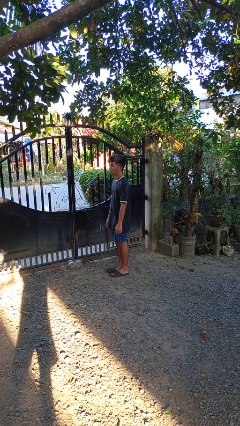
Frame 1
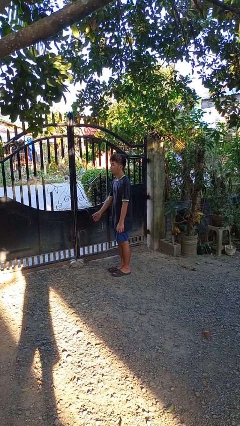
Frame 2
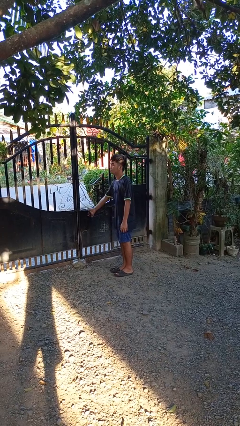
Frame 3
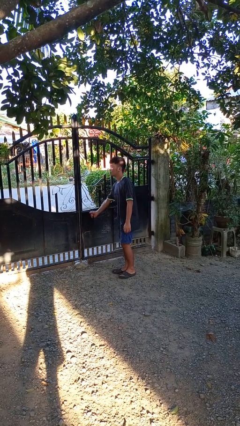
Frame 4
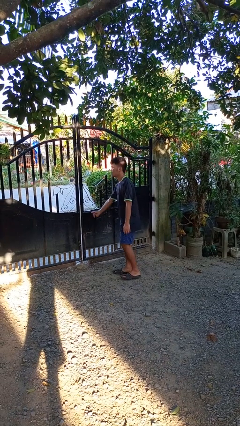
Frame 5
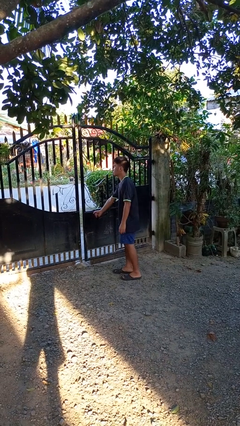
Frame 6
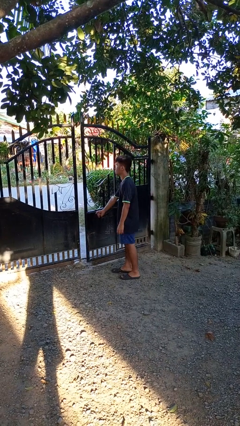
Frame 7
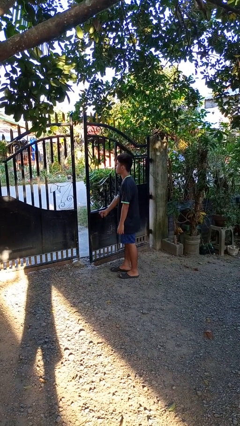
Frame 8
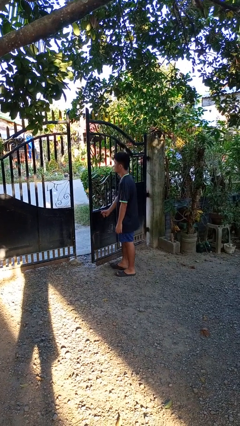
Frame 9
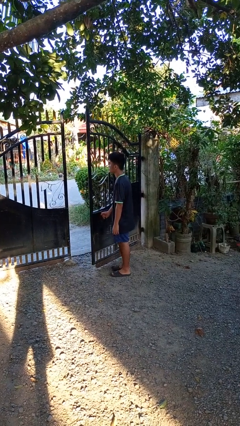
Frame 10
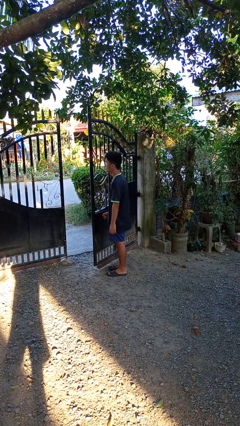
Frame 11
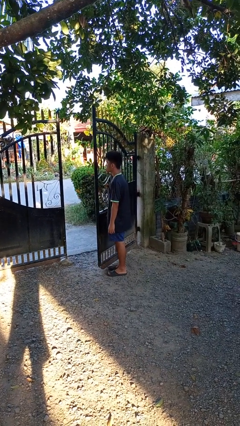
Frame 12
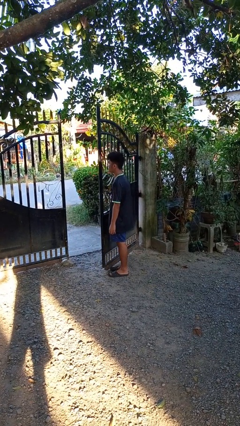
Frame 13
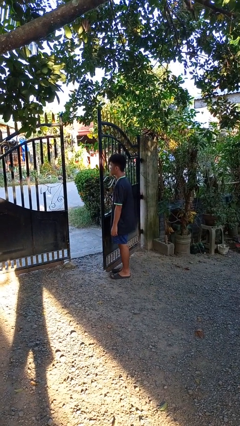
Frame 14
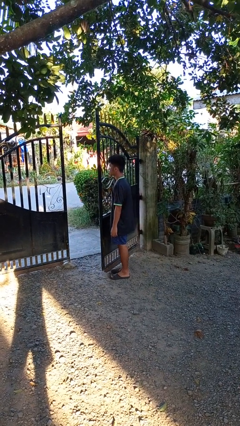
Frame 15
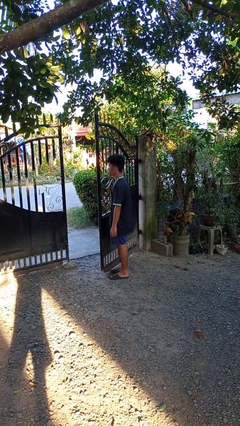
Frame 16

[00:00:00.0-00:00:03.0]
person opens gate

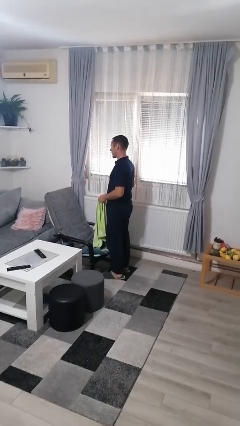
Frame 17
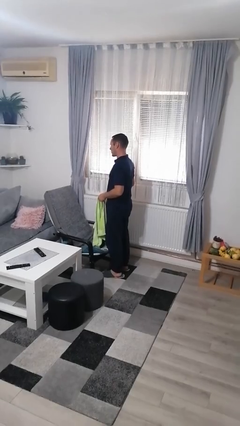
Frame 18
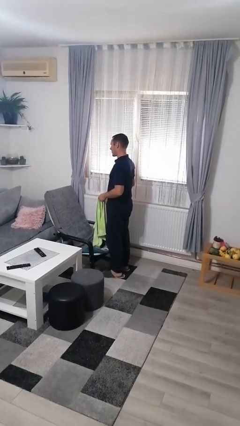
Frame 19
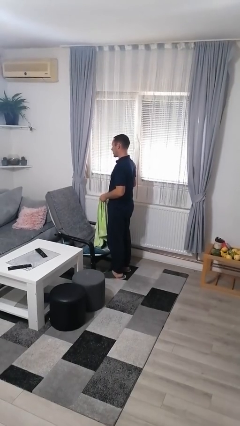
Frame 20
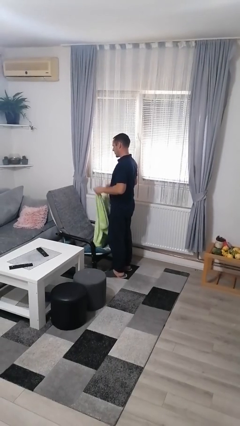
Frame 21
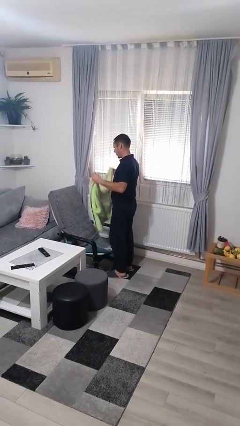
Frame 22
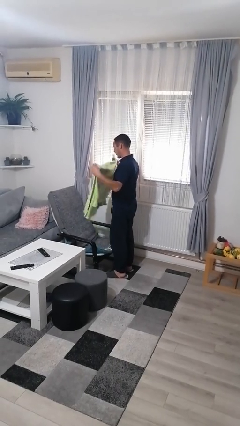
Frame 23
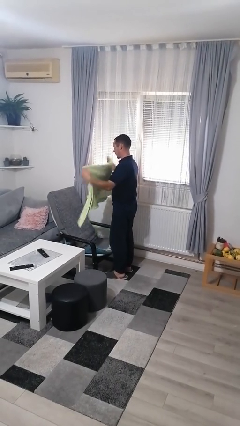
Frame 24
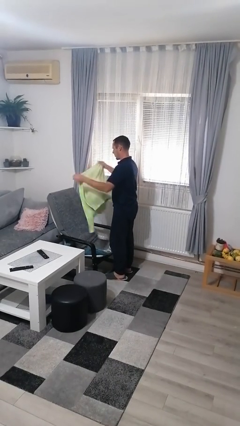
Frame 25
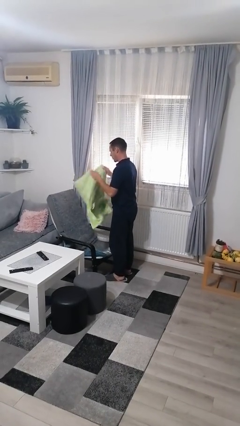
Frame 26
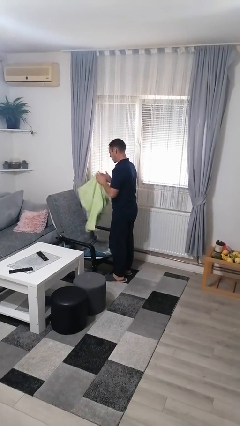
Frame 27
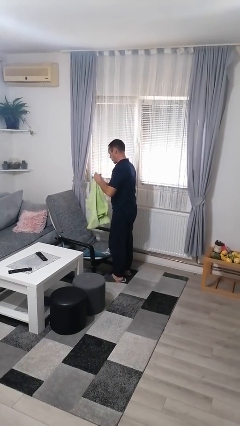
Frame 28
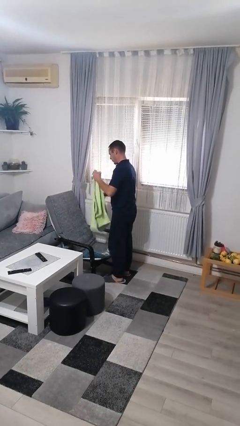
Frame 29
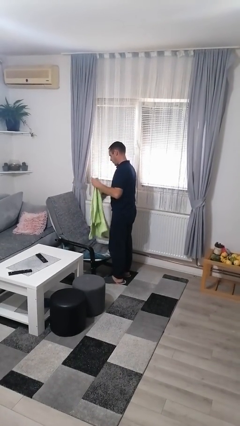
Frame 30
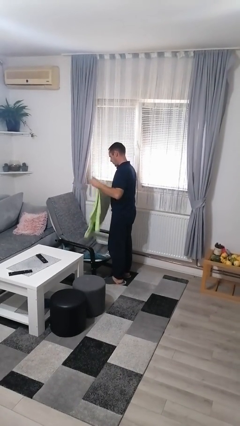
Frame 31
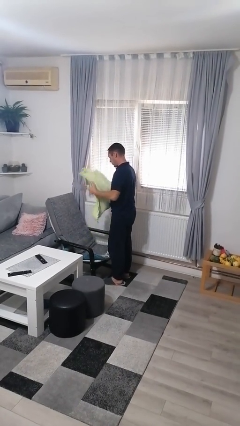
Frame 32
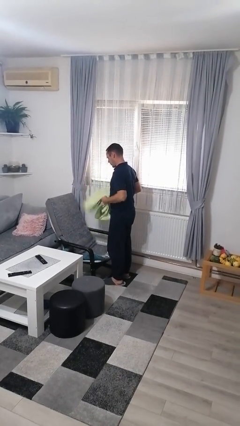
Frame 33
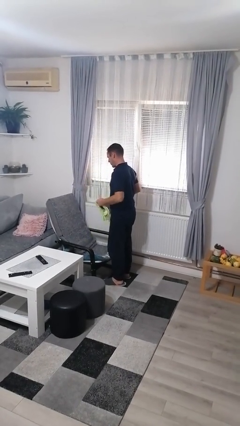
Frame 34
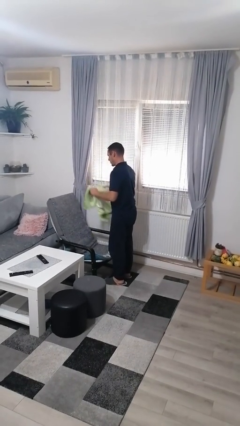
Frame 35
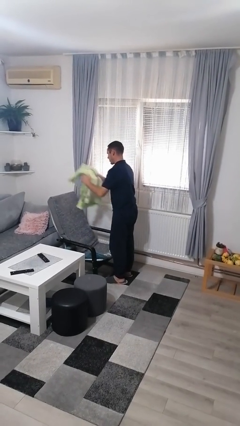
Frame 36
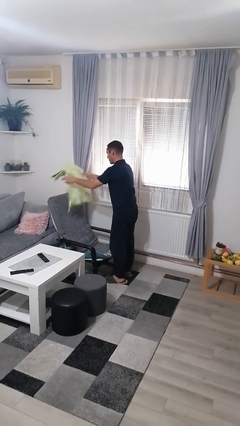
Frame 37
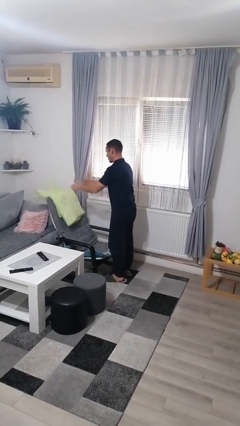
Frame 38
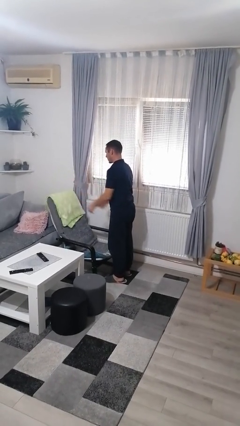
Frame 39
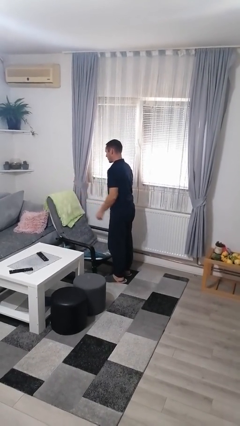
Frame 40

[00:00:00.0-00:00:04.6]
person folds blanket

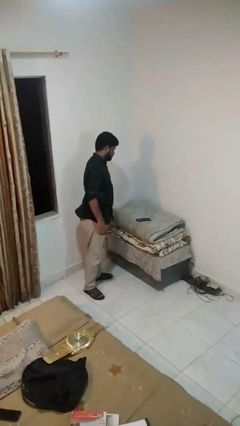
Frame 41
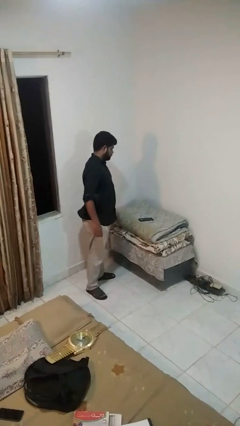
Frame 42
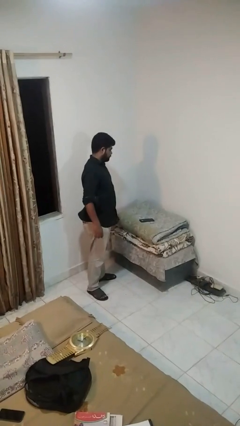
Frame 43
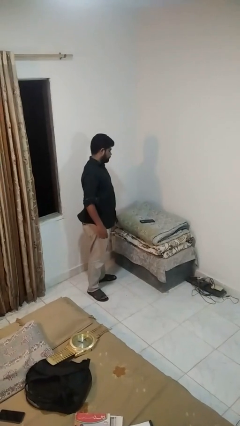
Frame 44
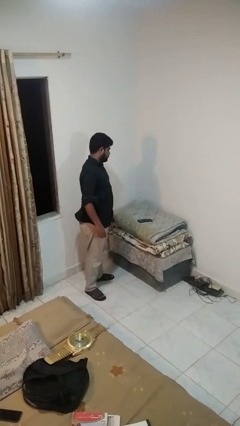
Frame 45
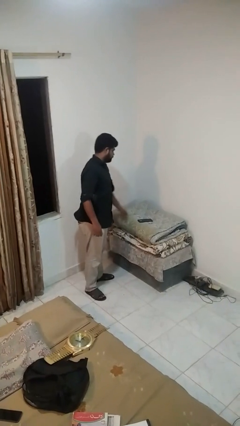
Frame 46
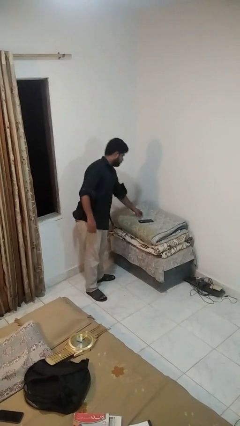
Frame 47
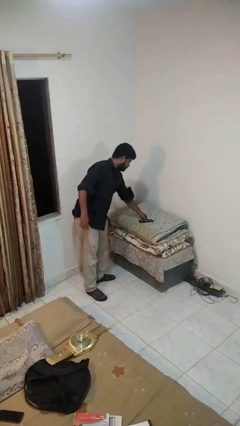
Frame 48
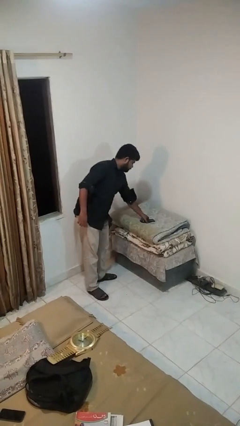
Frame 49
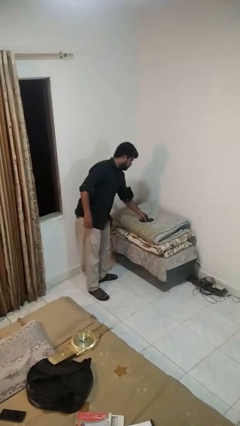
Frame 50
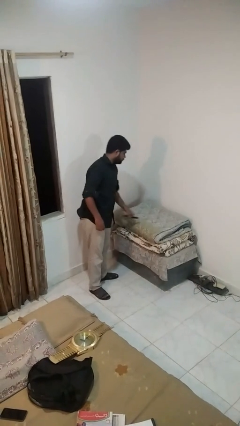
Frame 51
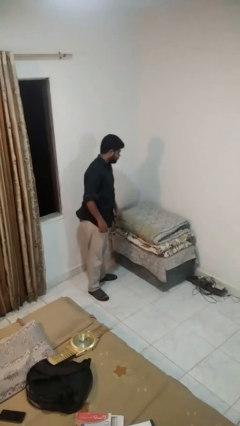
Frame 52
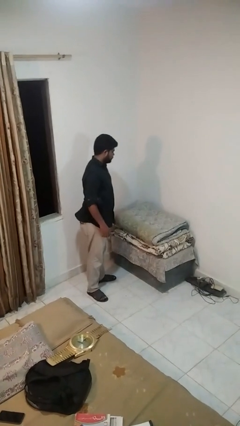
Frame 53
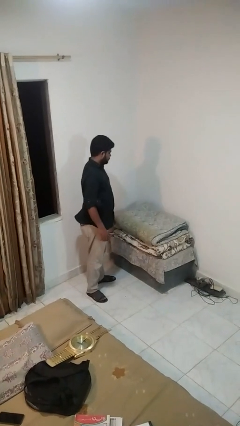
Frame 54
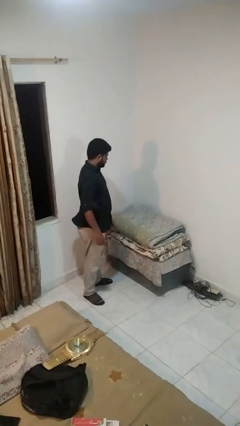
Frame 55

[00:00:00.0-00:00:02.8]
person picks up object from couch

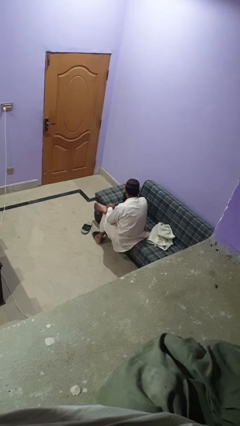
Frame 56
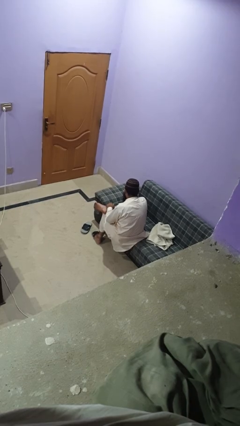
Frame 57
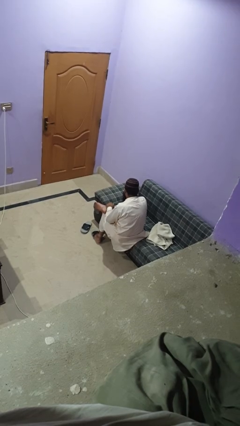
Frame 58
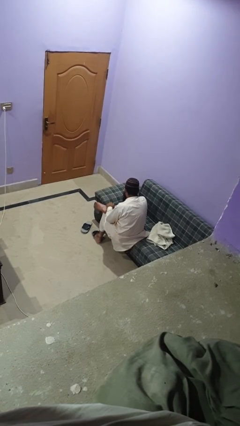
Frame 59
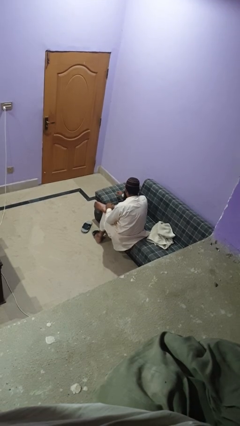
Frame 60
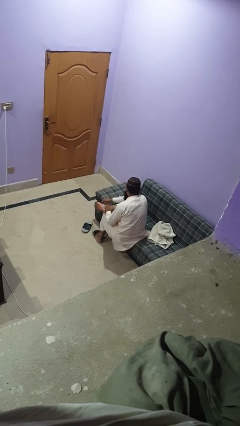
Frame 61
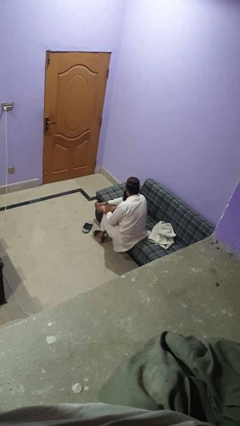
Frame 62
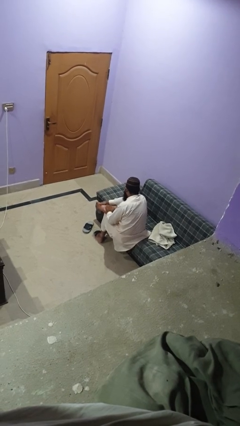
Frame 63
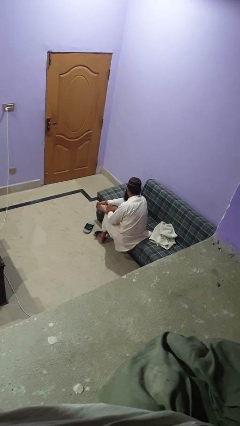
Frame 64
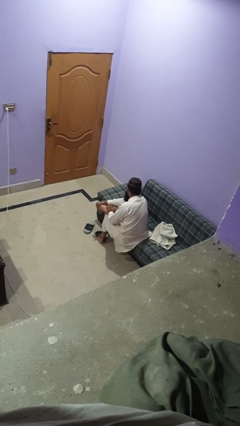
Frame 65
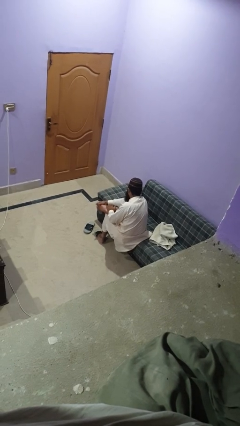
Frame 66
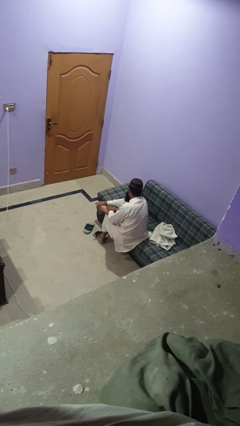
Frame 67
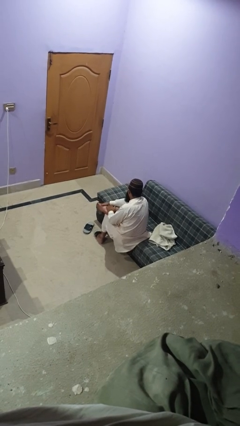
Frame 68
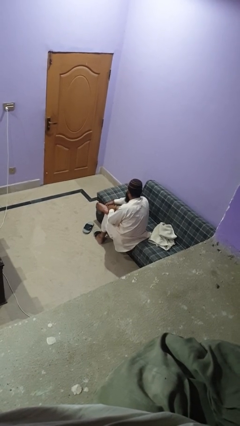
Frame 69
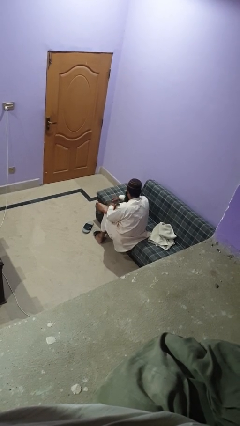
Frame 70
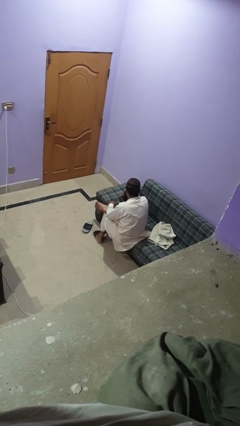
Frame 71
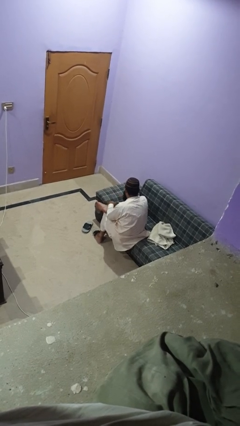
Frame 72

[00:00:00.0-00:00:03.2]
person rubs foot

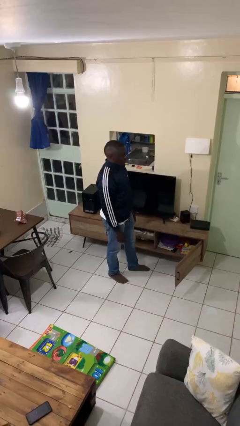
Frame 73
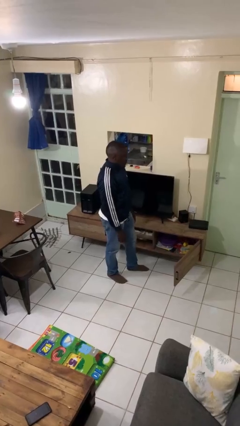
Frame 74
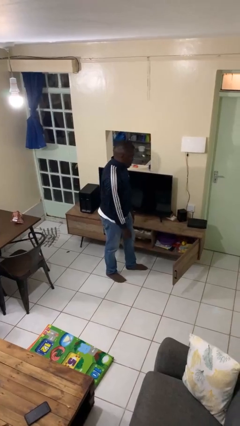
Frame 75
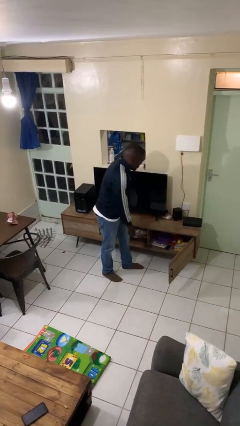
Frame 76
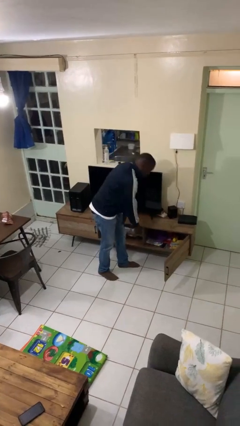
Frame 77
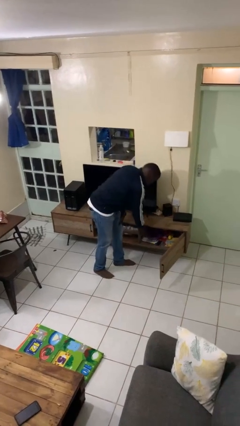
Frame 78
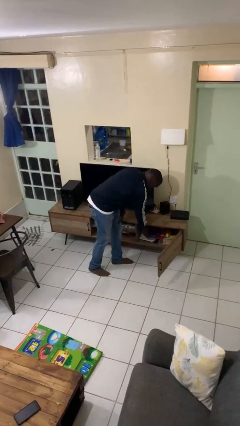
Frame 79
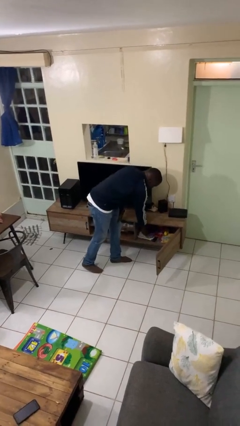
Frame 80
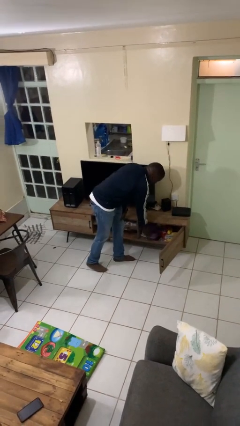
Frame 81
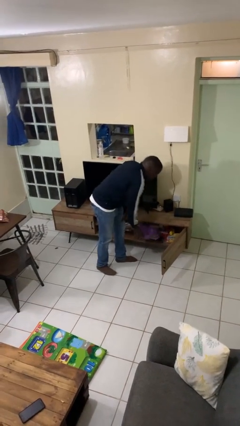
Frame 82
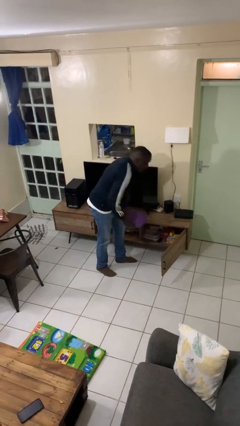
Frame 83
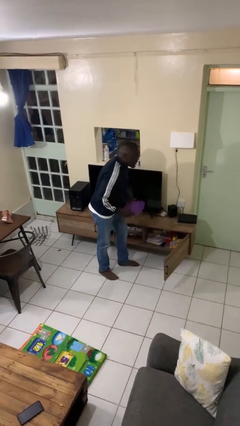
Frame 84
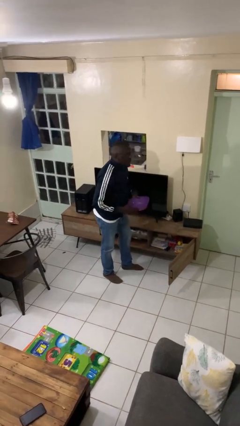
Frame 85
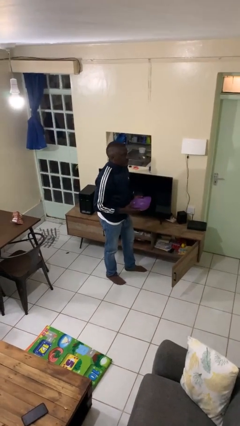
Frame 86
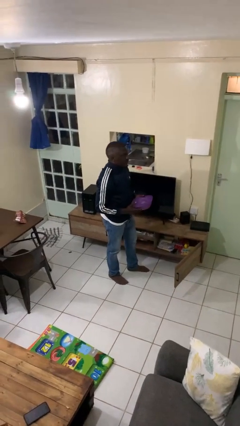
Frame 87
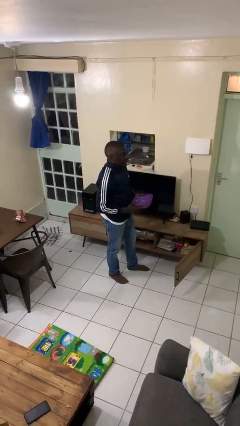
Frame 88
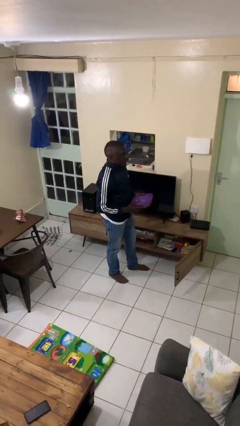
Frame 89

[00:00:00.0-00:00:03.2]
person picks up object from cabinet

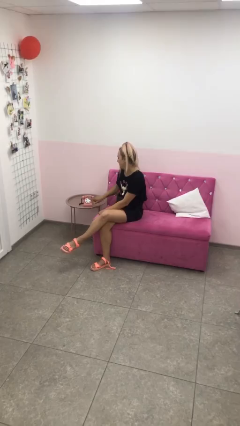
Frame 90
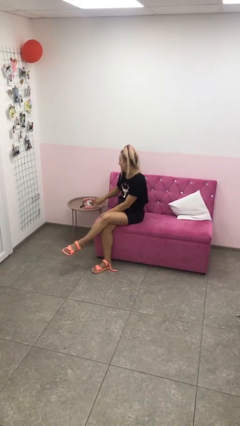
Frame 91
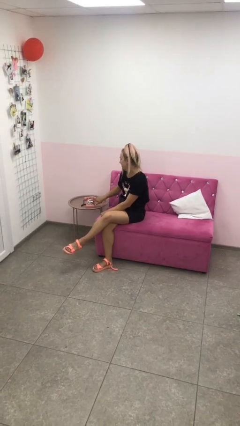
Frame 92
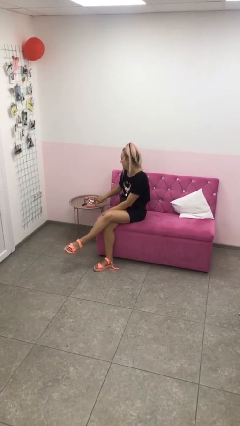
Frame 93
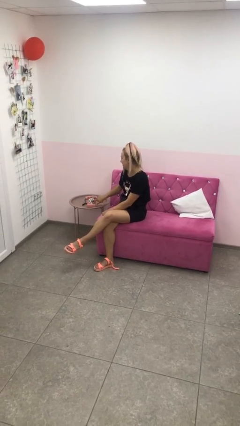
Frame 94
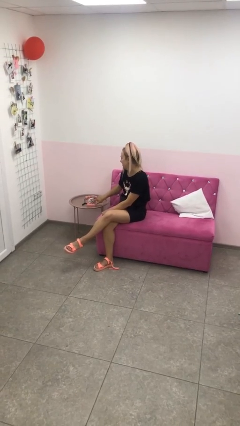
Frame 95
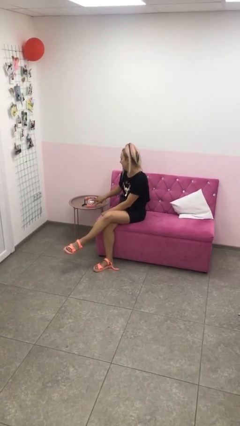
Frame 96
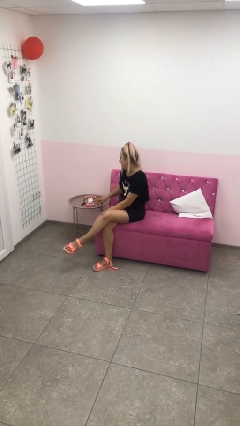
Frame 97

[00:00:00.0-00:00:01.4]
person taps object with finger
